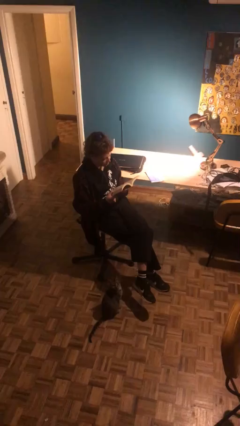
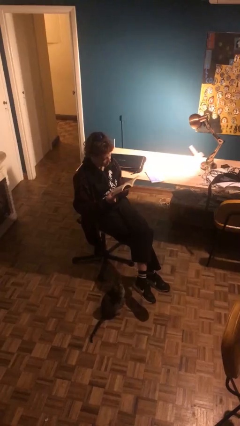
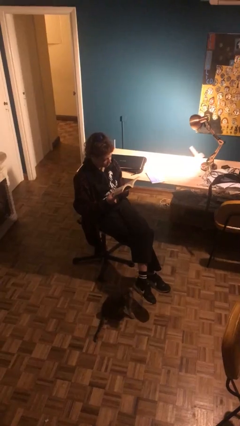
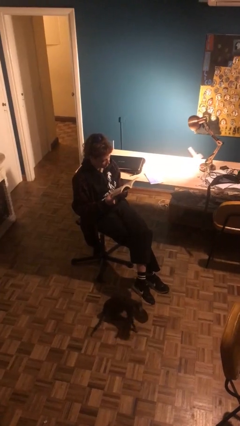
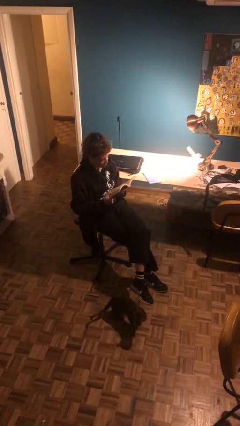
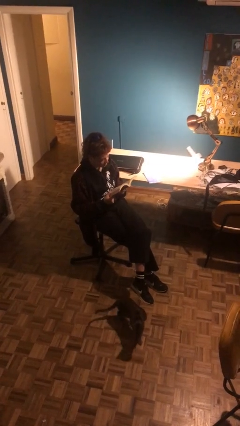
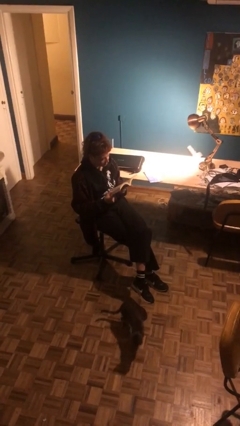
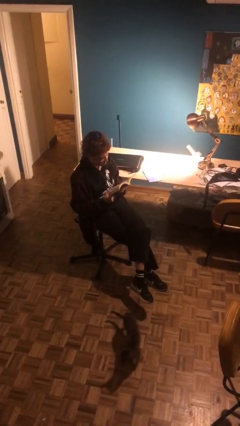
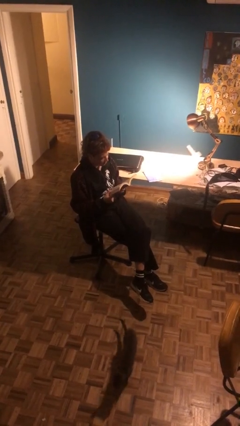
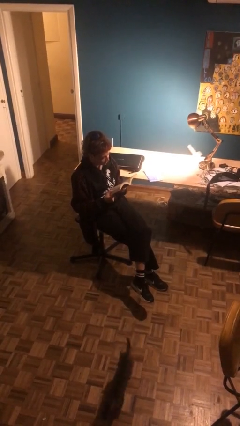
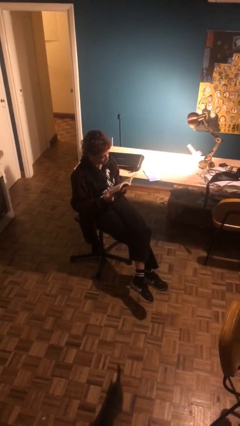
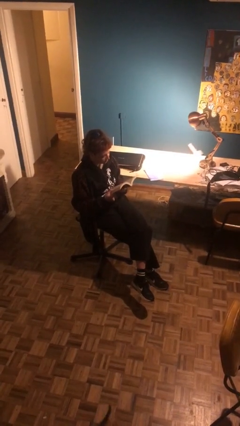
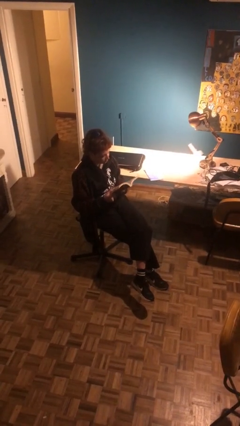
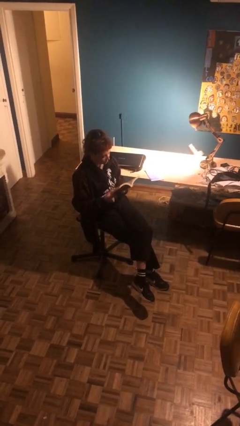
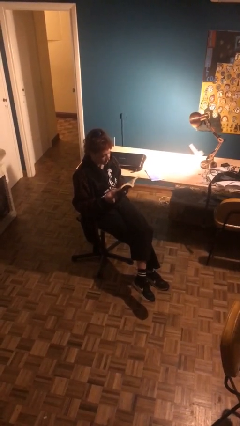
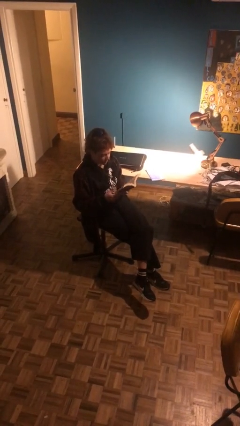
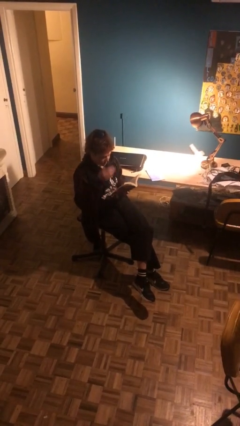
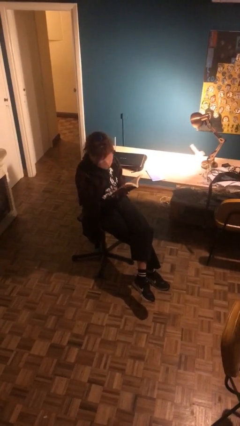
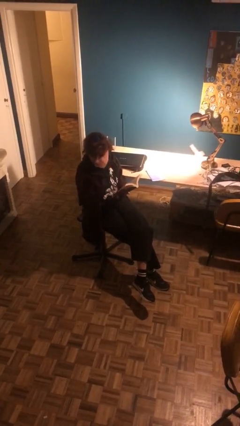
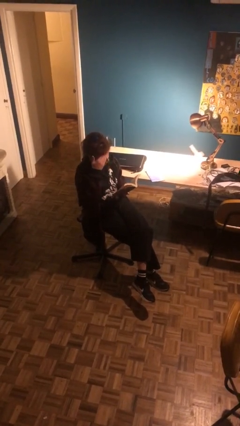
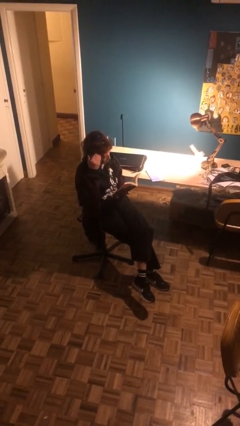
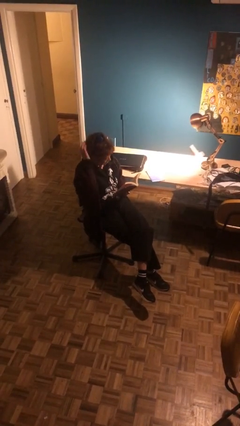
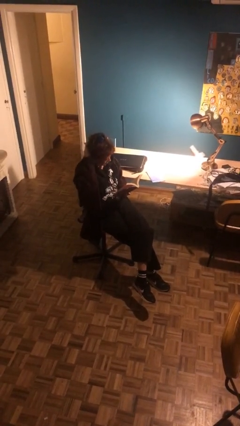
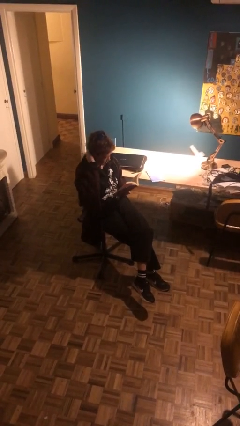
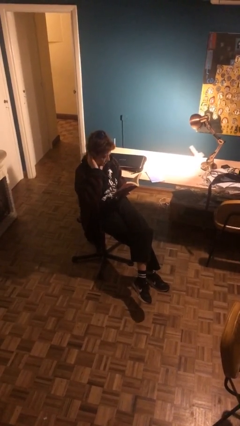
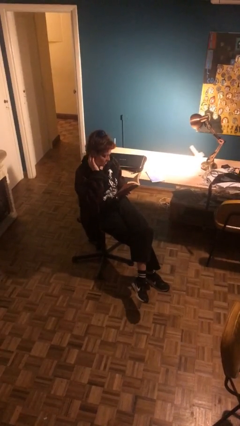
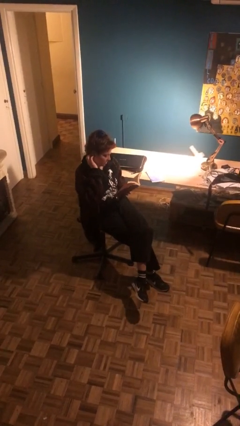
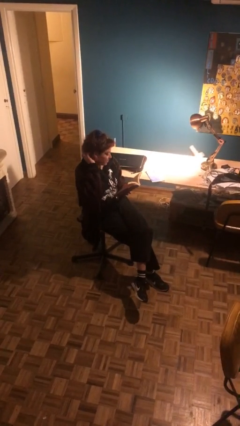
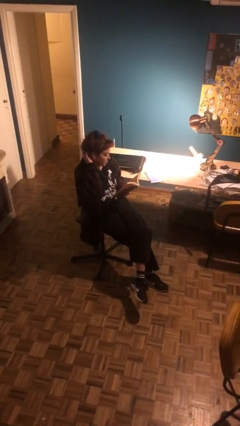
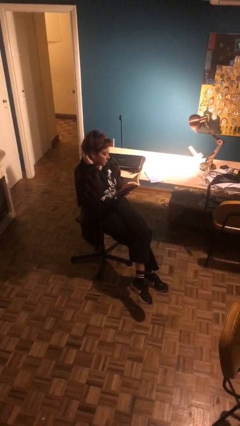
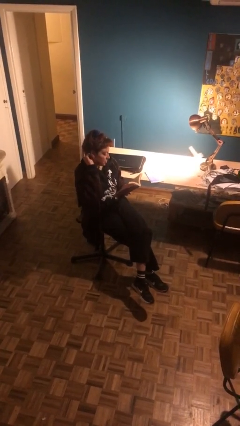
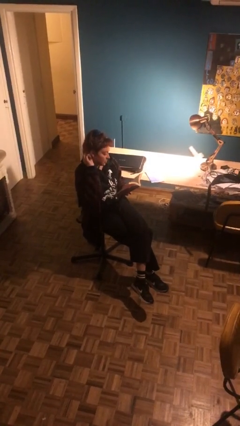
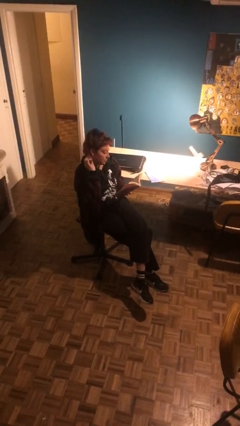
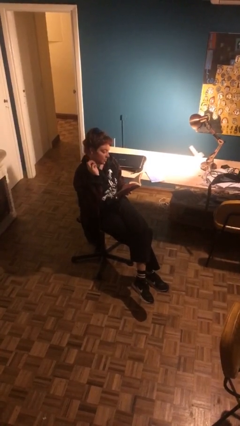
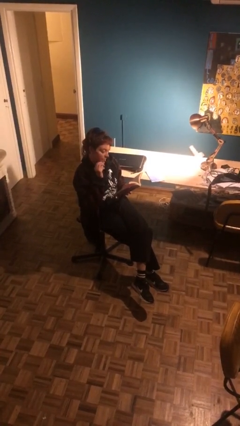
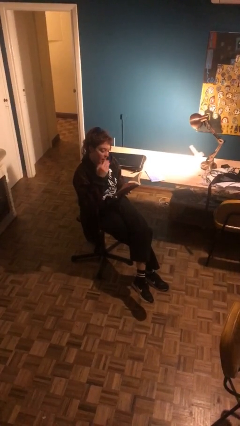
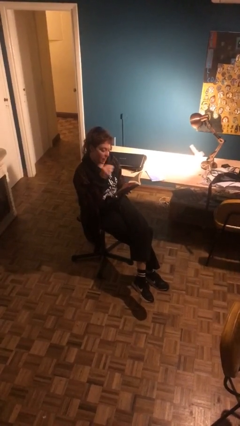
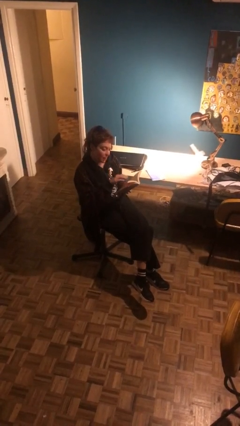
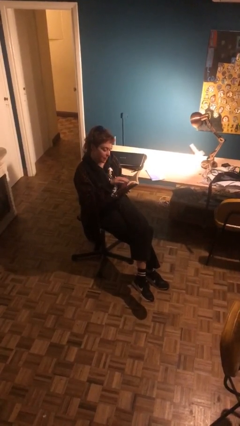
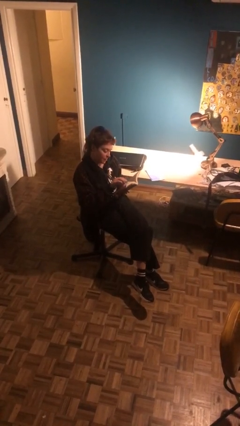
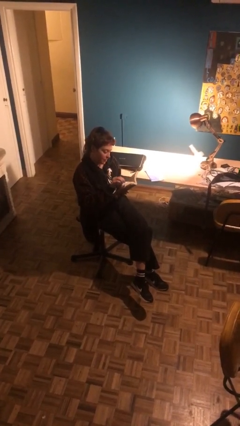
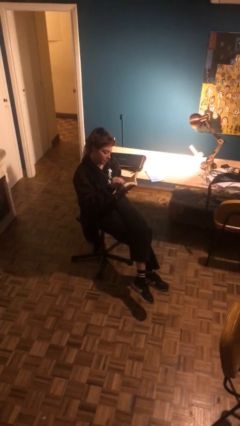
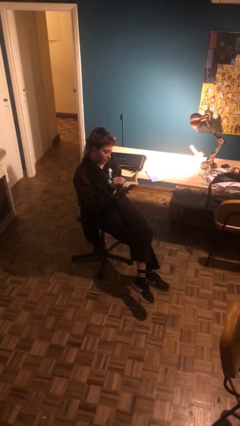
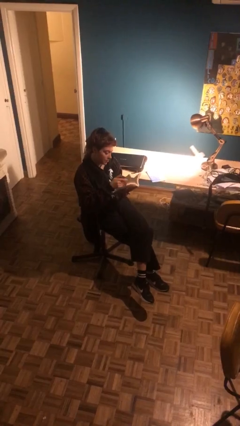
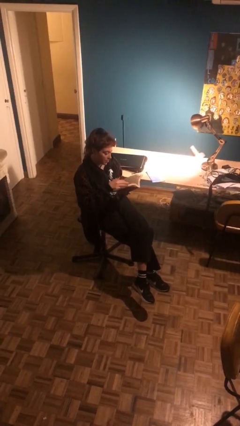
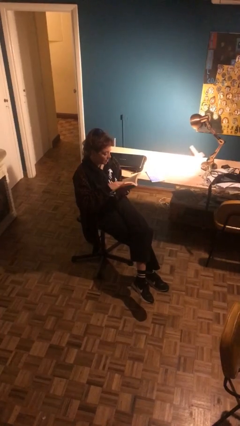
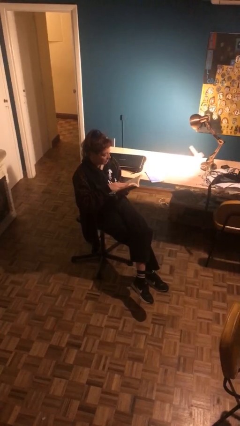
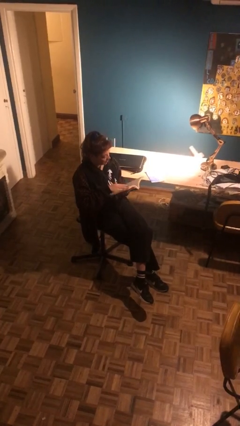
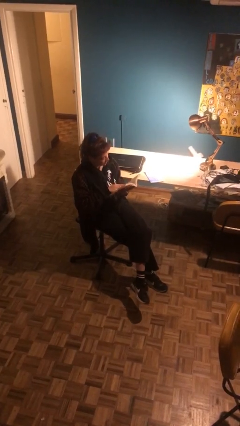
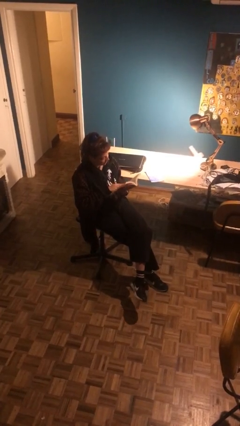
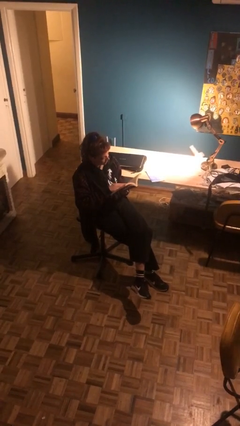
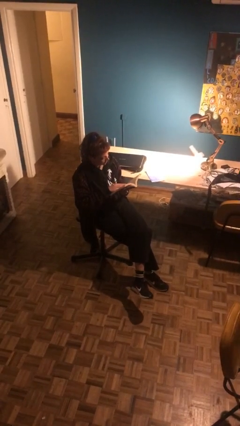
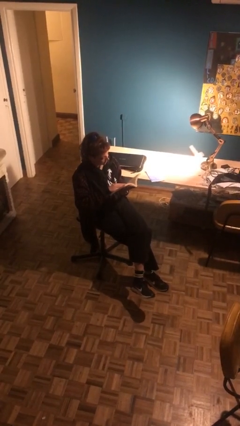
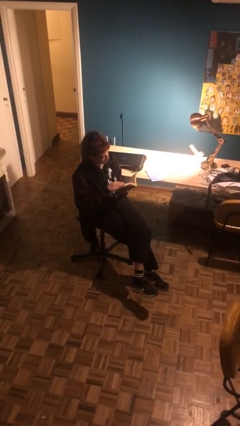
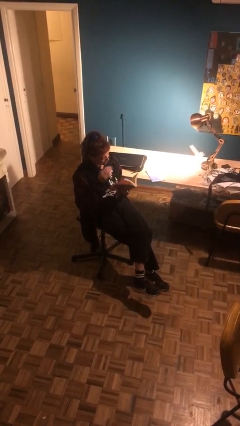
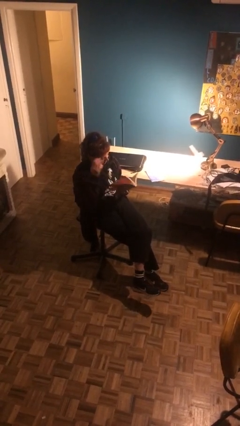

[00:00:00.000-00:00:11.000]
person reads document

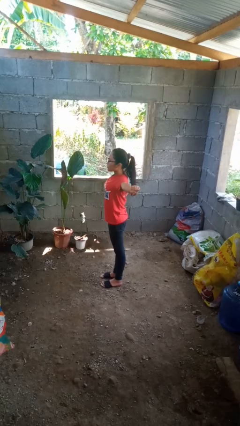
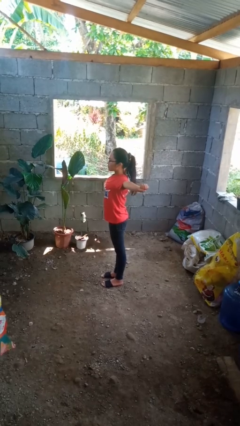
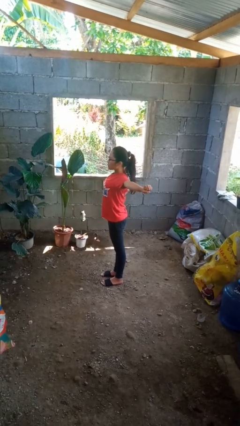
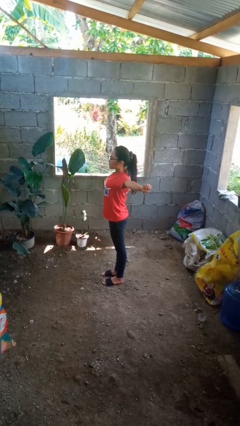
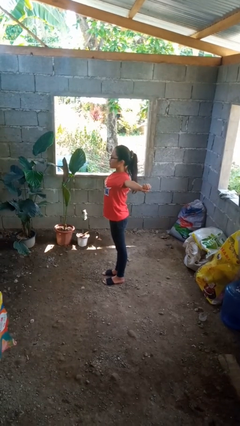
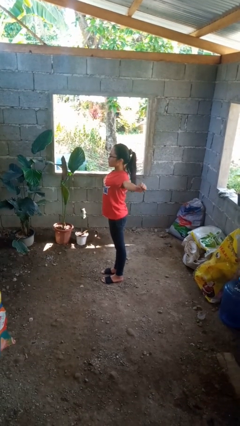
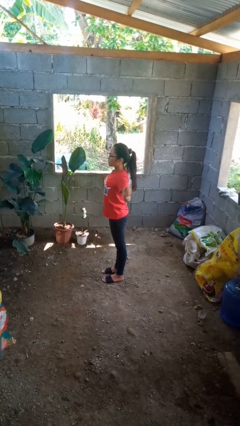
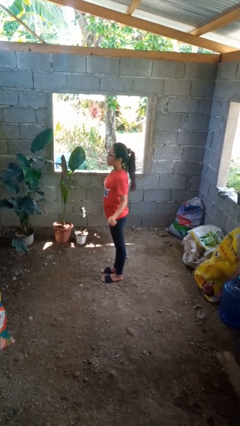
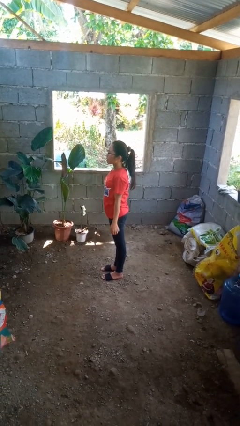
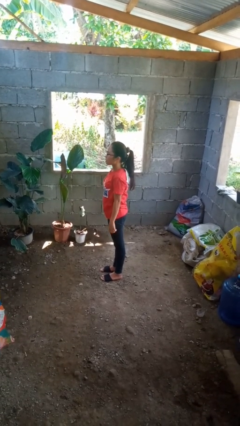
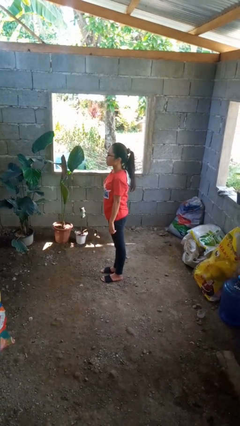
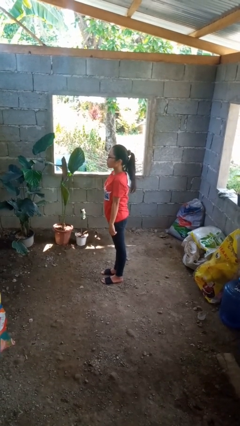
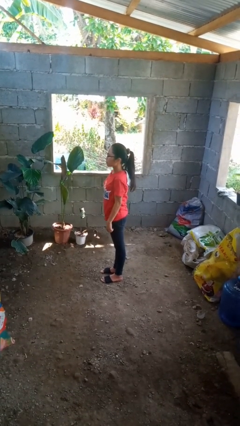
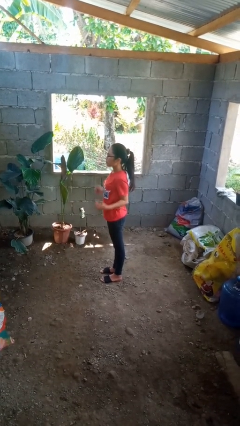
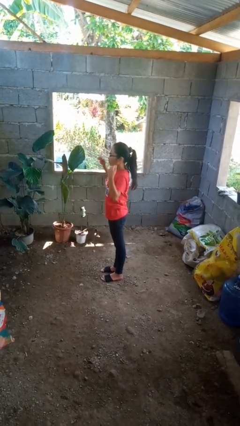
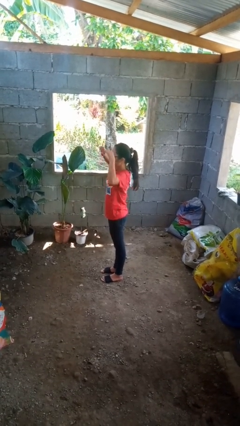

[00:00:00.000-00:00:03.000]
person stretches arms to side

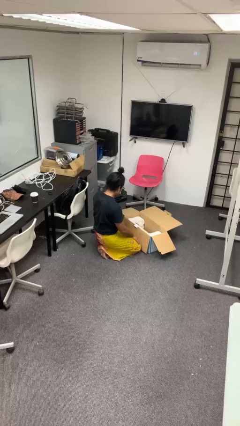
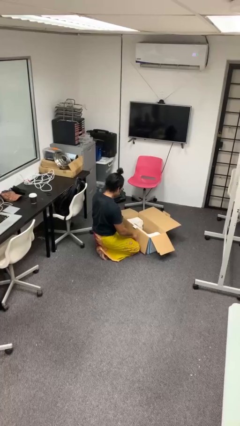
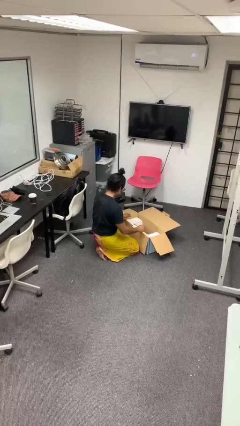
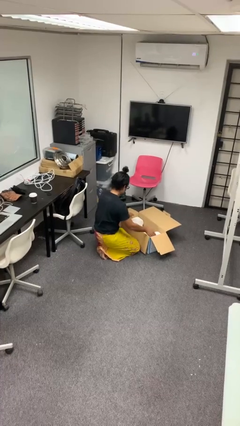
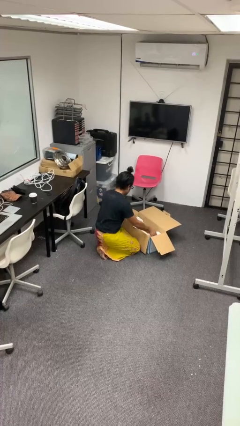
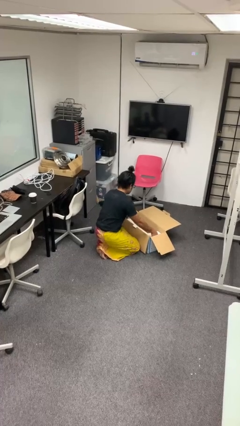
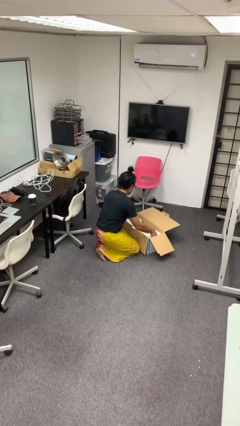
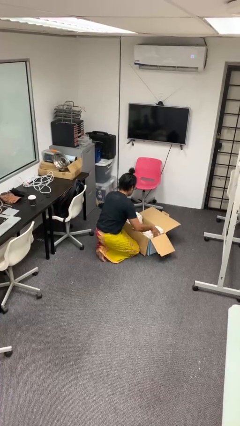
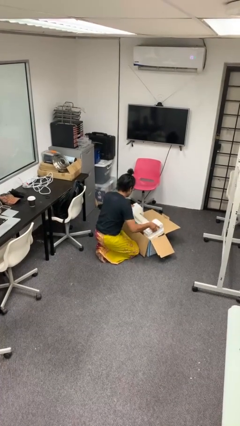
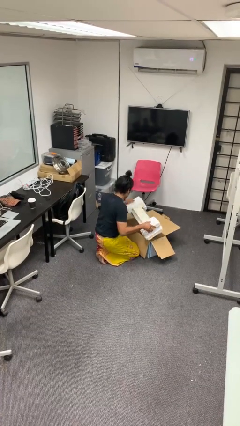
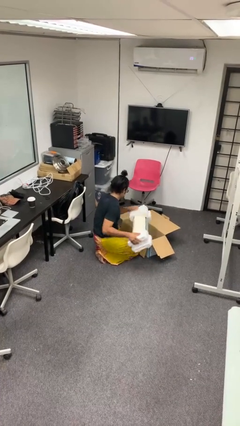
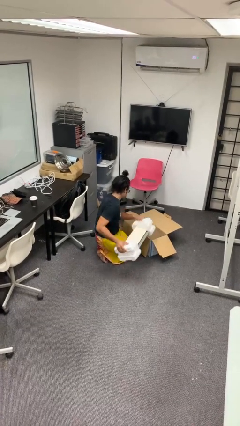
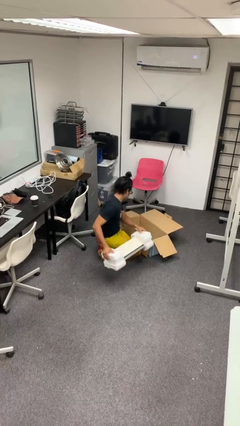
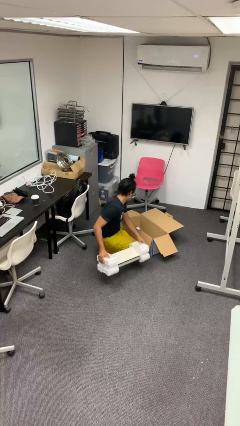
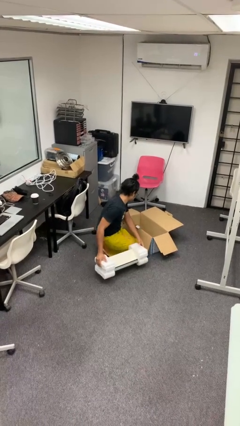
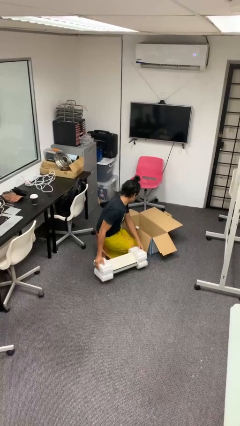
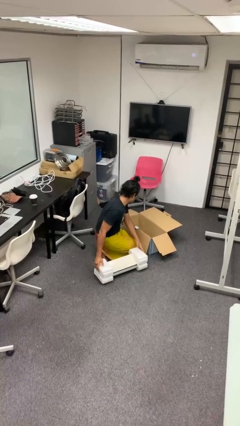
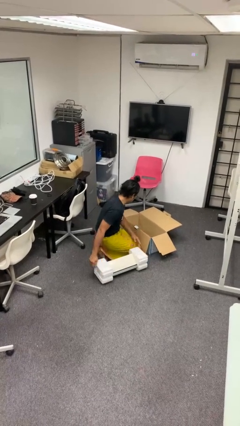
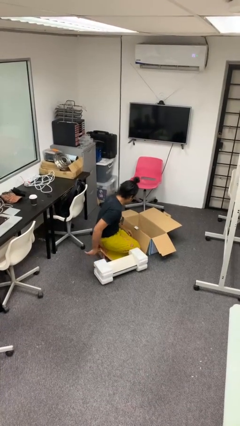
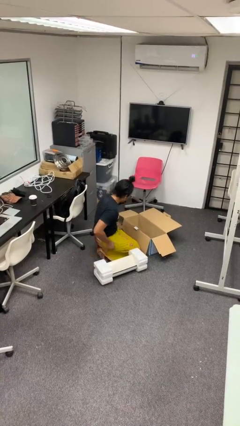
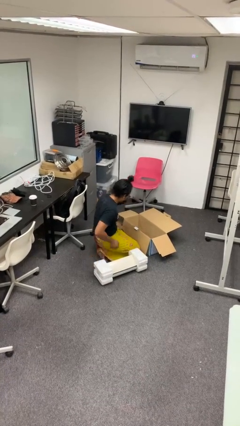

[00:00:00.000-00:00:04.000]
person takes object from box
